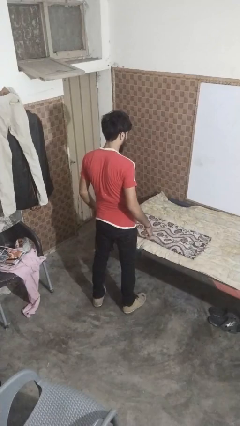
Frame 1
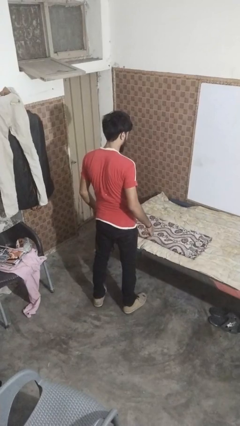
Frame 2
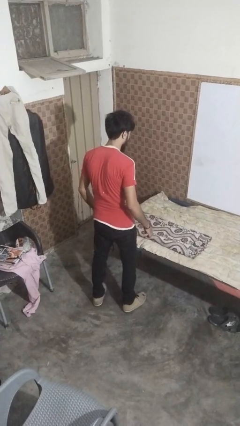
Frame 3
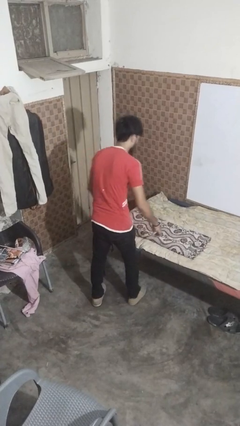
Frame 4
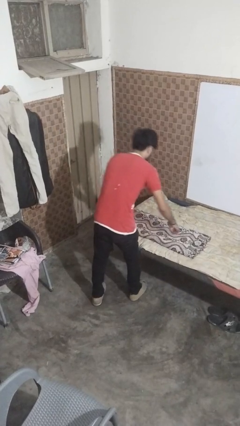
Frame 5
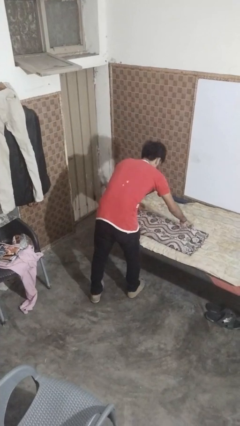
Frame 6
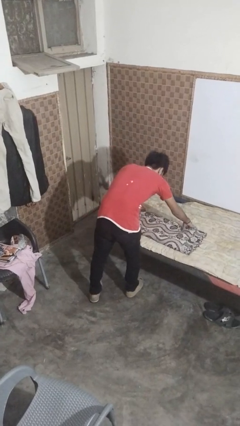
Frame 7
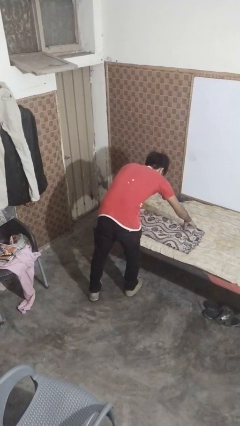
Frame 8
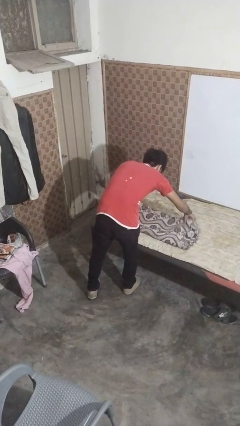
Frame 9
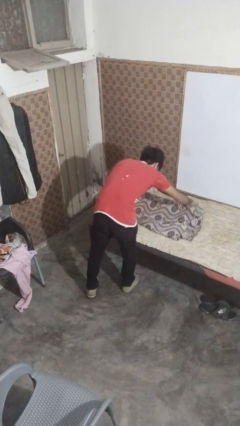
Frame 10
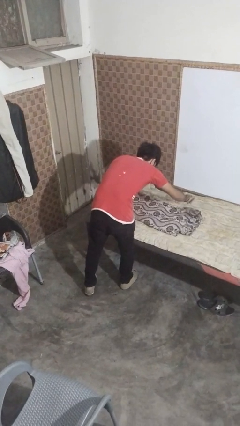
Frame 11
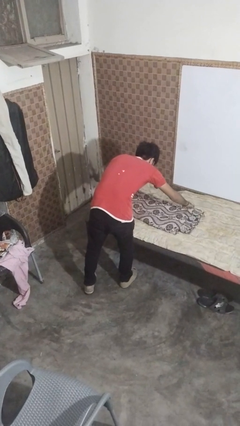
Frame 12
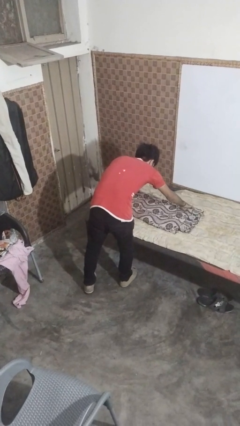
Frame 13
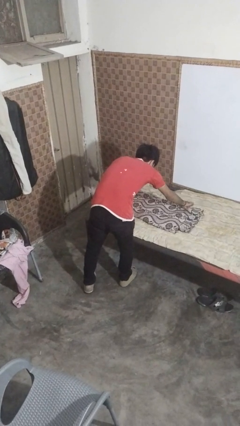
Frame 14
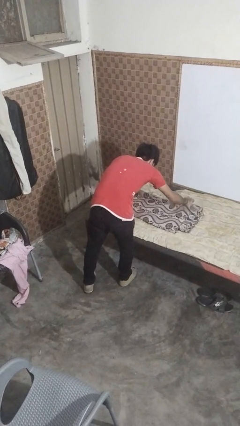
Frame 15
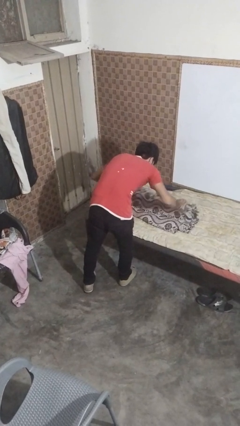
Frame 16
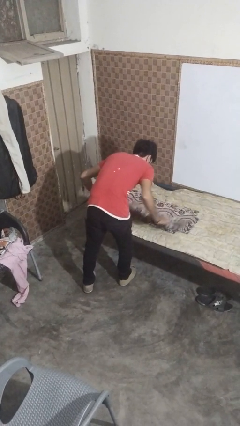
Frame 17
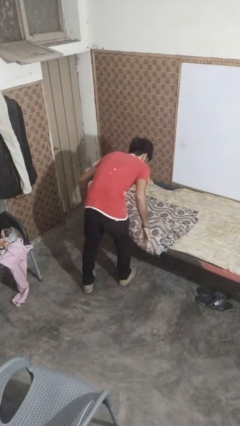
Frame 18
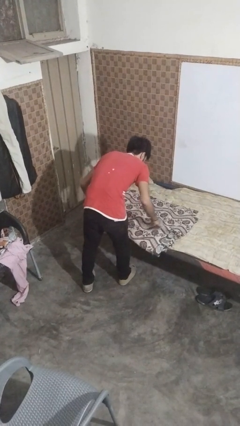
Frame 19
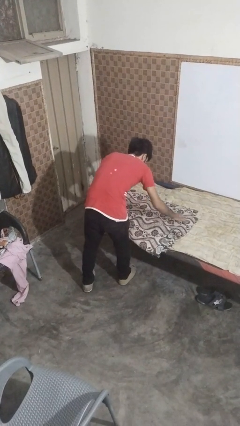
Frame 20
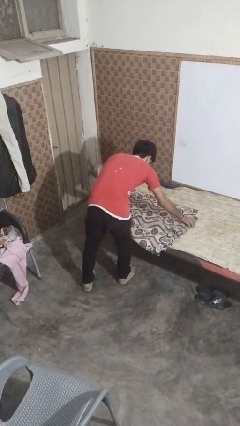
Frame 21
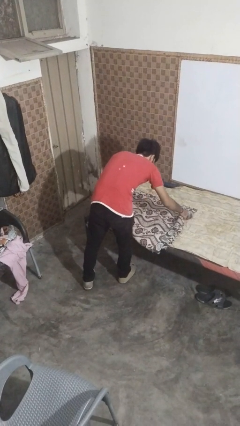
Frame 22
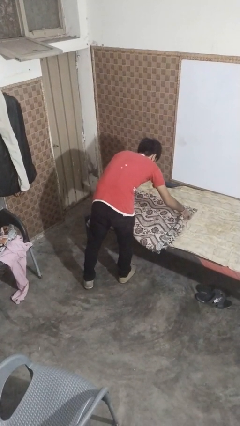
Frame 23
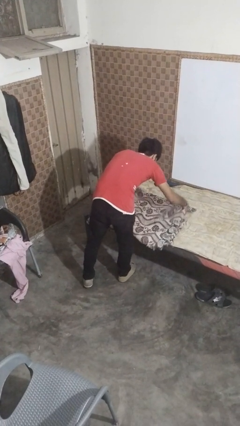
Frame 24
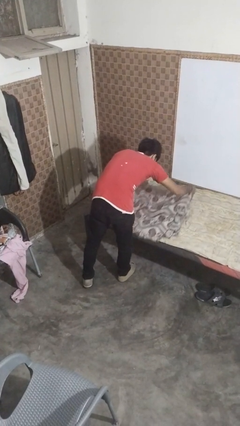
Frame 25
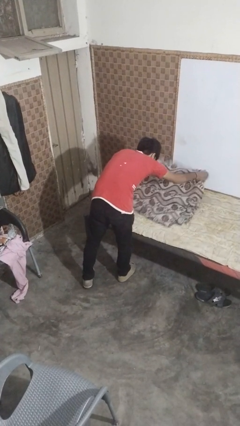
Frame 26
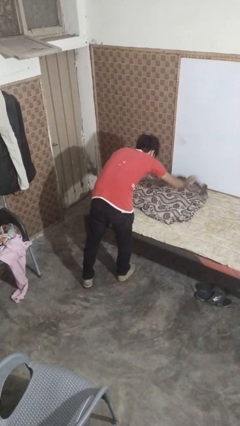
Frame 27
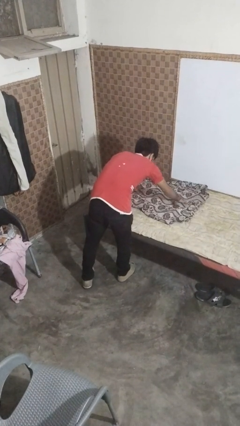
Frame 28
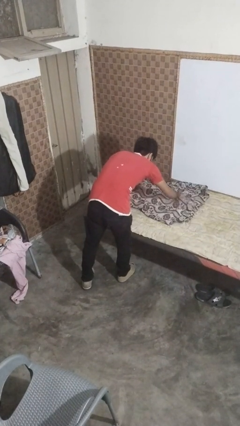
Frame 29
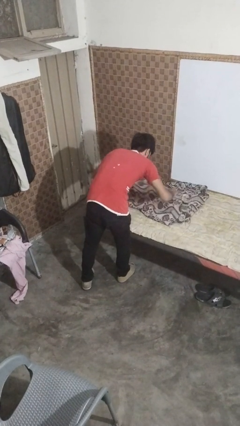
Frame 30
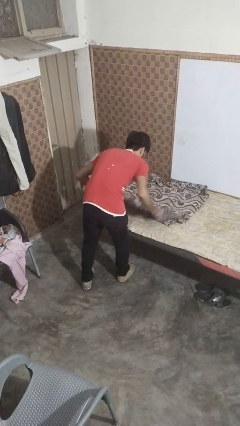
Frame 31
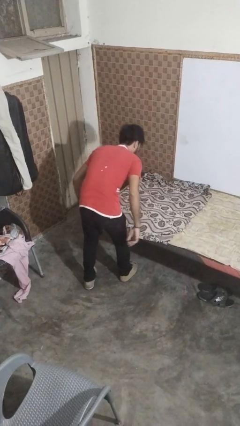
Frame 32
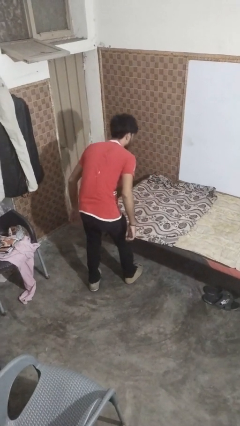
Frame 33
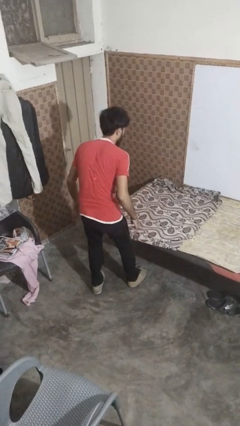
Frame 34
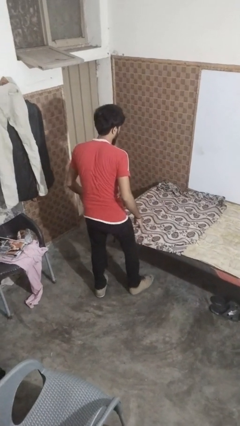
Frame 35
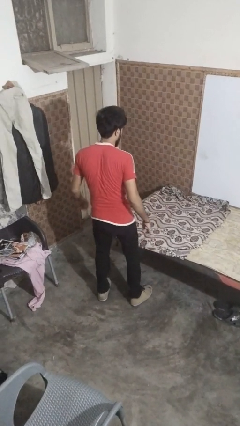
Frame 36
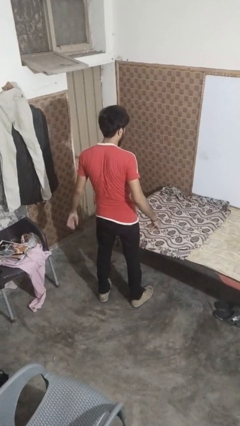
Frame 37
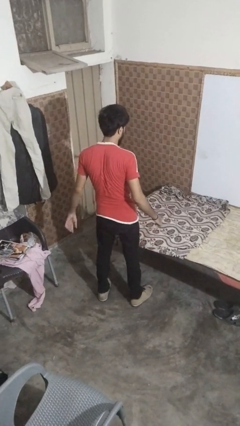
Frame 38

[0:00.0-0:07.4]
person unfolds blanket

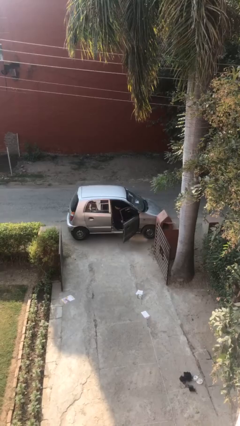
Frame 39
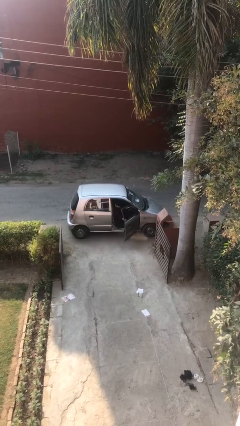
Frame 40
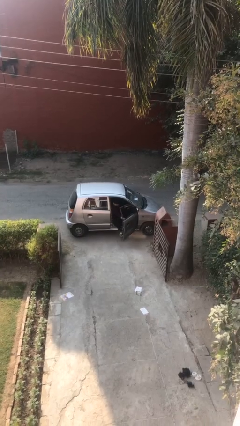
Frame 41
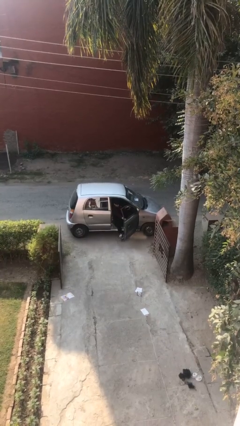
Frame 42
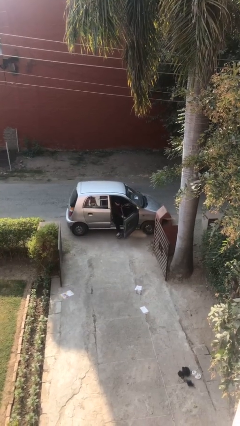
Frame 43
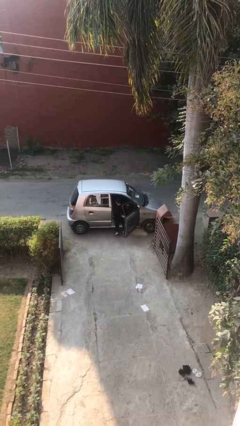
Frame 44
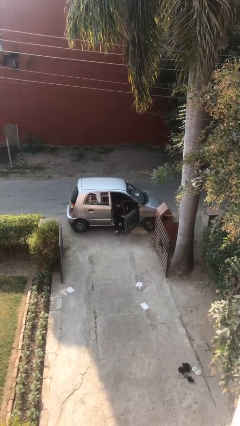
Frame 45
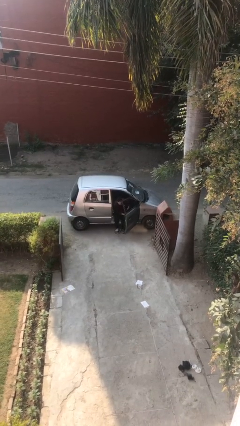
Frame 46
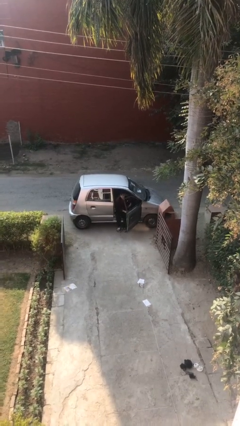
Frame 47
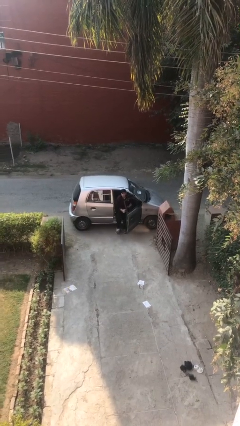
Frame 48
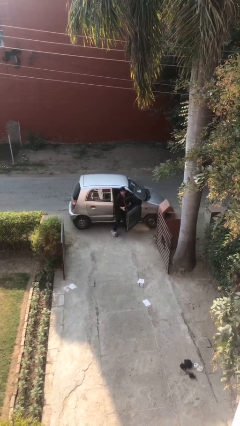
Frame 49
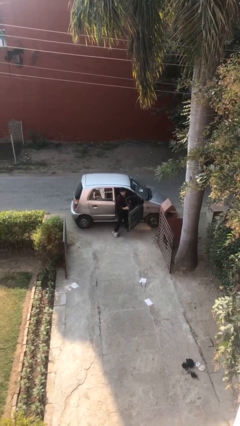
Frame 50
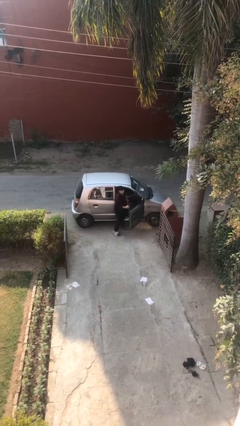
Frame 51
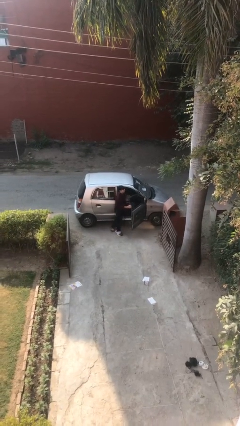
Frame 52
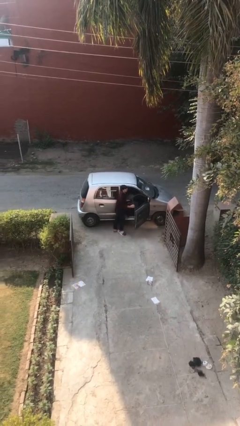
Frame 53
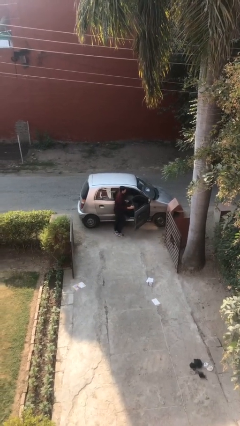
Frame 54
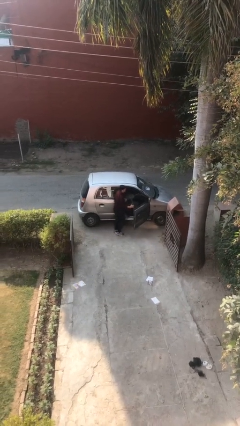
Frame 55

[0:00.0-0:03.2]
person exits car

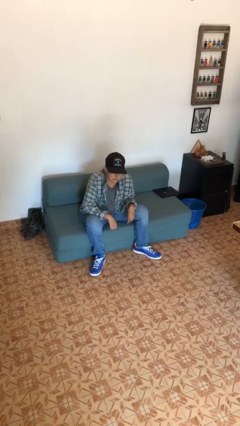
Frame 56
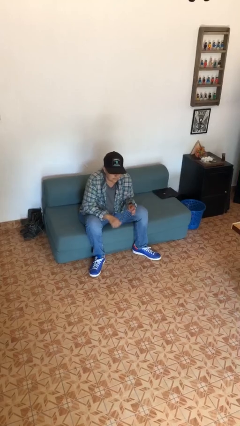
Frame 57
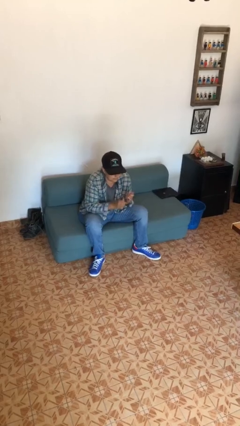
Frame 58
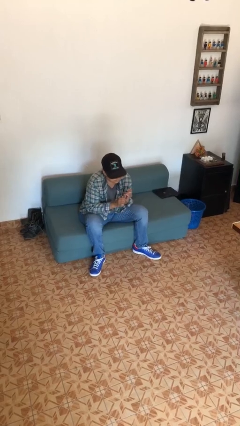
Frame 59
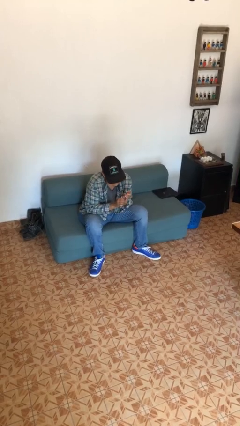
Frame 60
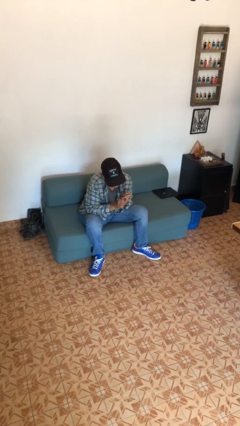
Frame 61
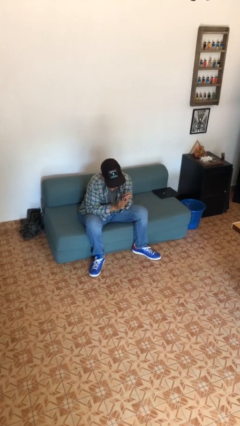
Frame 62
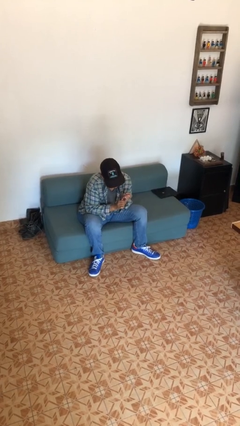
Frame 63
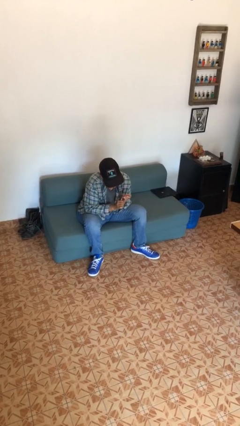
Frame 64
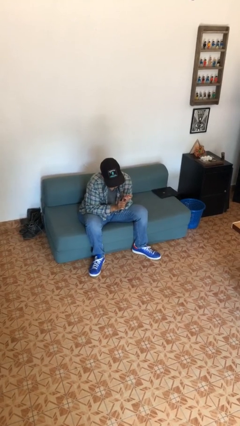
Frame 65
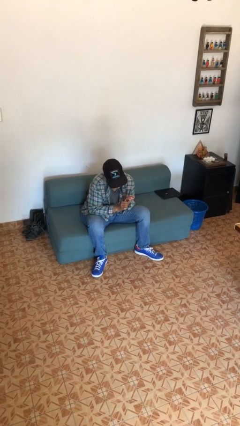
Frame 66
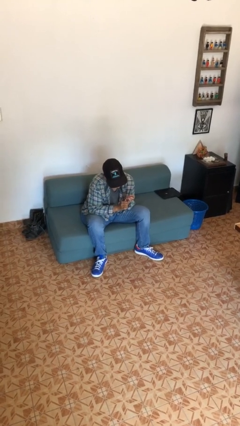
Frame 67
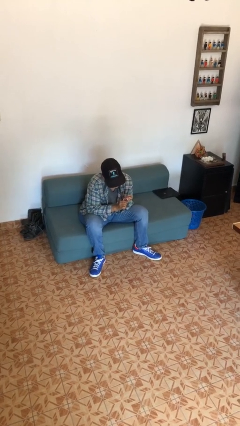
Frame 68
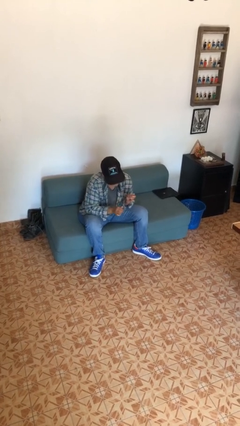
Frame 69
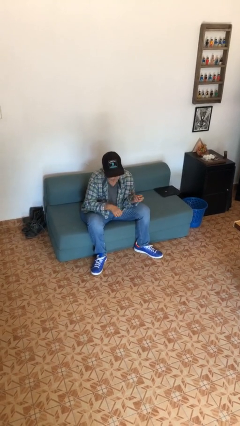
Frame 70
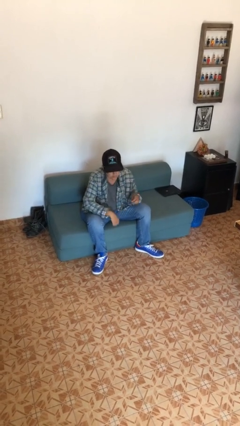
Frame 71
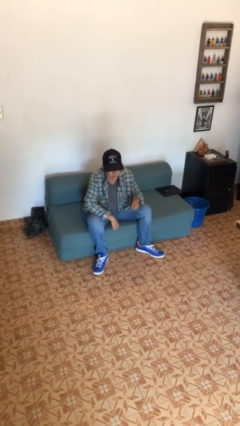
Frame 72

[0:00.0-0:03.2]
person files fingernails

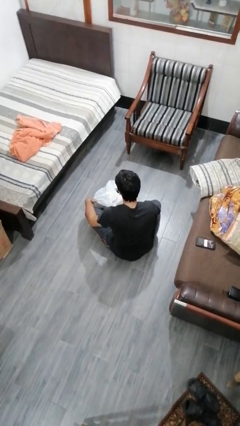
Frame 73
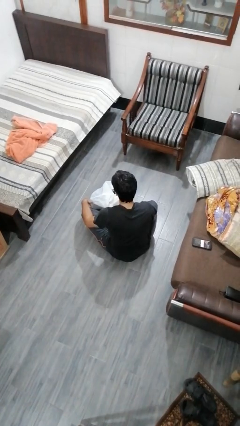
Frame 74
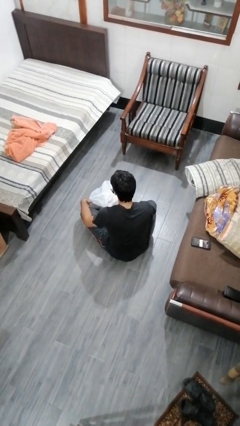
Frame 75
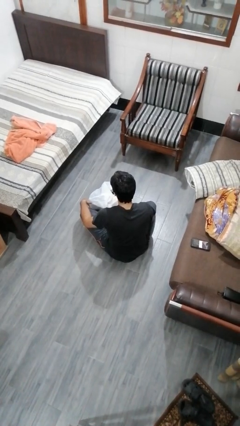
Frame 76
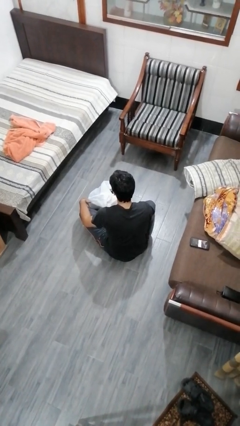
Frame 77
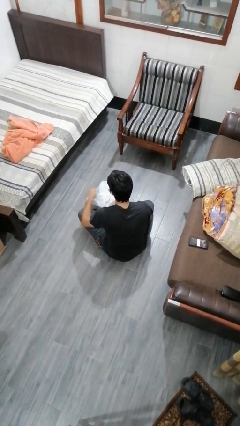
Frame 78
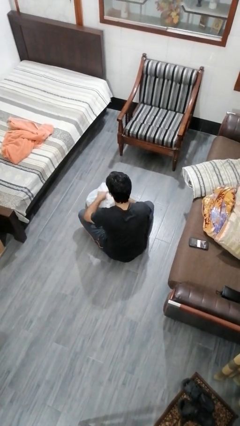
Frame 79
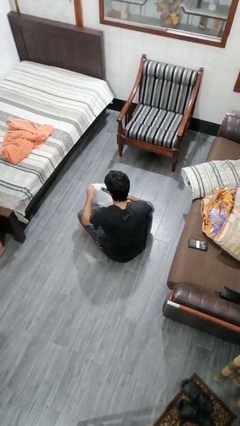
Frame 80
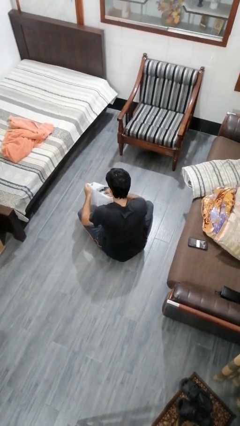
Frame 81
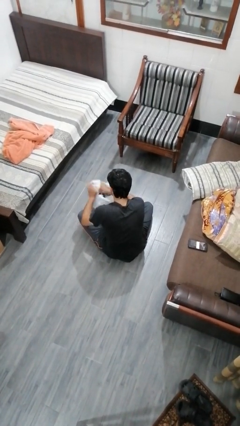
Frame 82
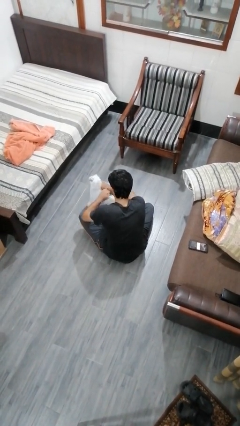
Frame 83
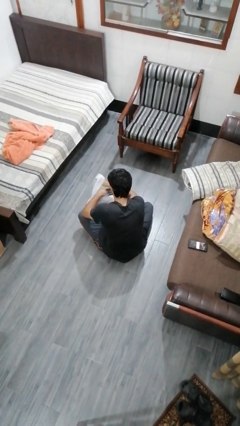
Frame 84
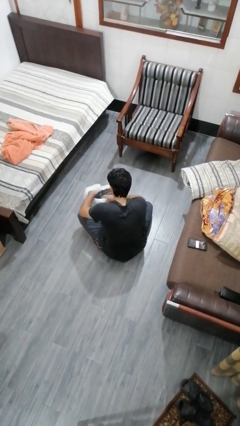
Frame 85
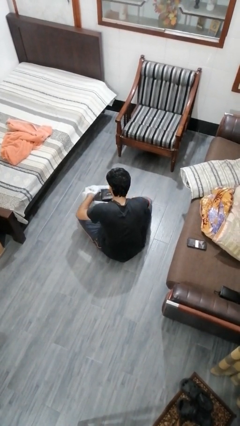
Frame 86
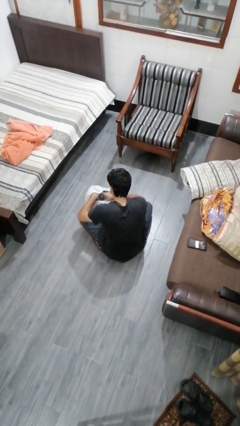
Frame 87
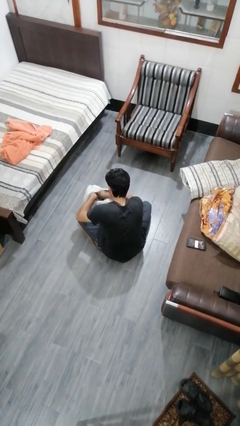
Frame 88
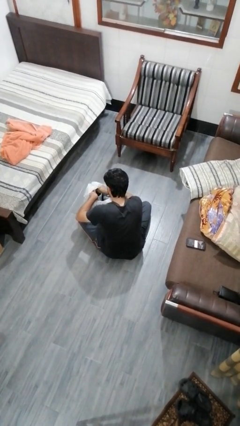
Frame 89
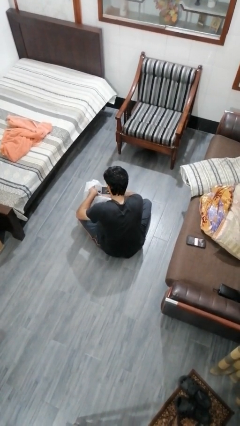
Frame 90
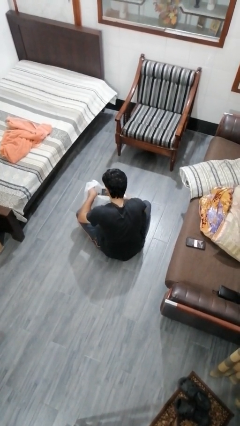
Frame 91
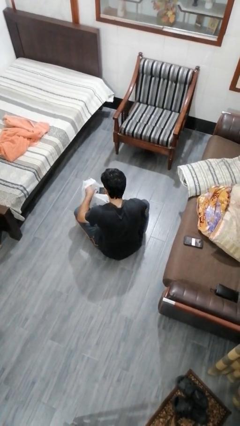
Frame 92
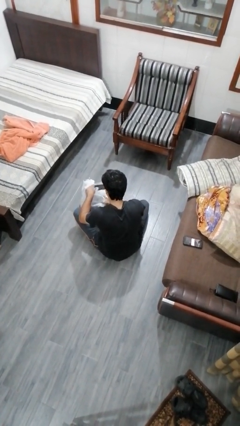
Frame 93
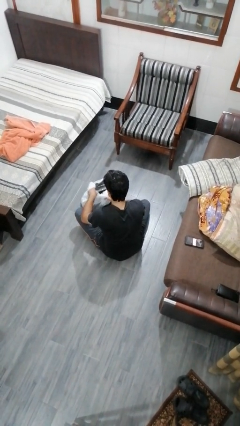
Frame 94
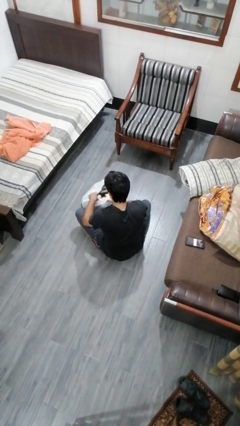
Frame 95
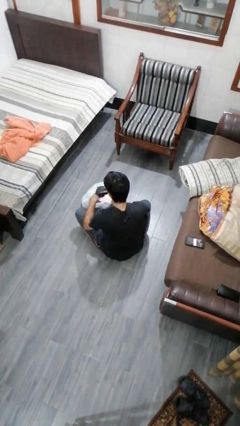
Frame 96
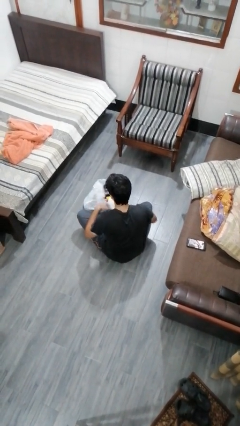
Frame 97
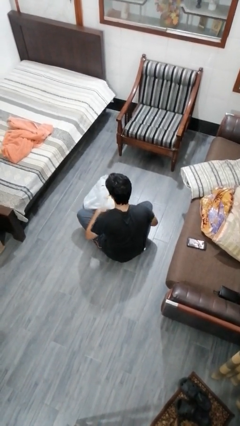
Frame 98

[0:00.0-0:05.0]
person searches in bag
